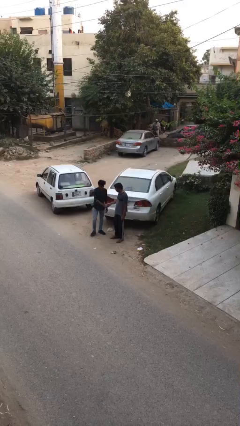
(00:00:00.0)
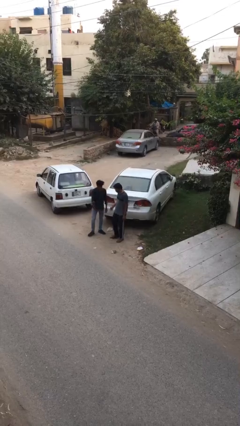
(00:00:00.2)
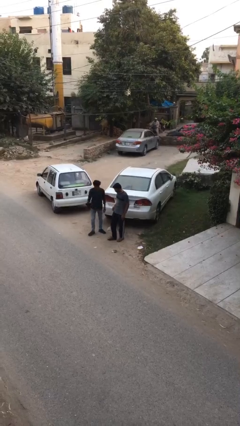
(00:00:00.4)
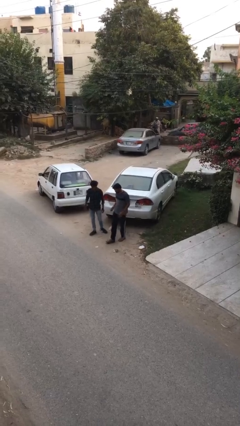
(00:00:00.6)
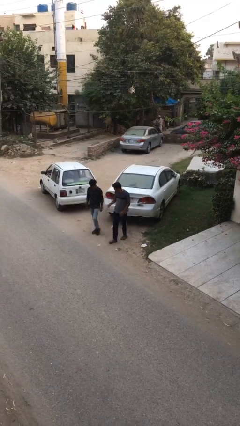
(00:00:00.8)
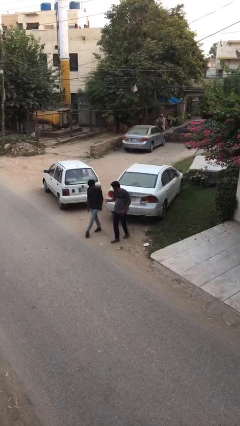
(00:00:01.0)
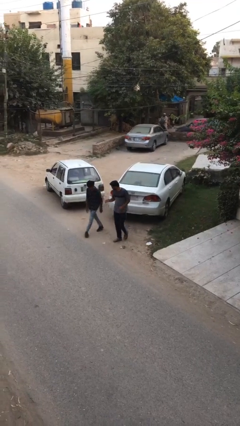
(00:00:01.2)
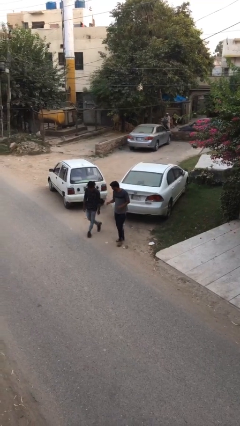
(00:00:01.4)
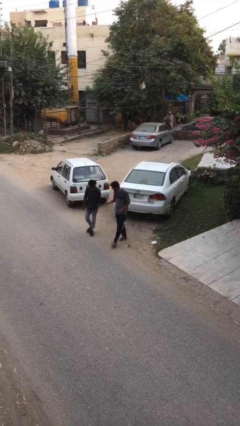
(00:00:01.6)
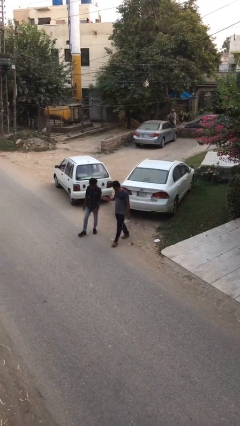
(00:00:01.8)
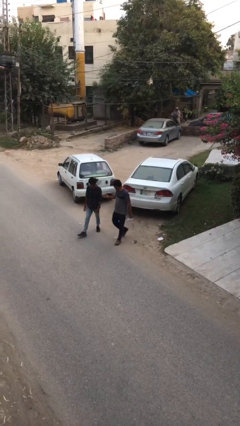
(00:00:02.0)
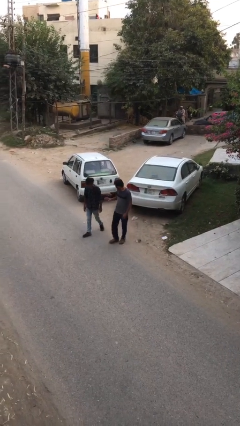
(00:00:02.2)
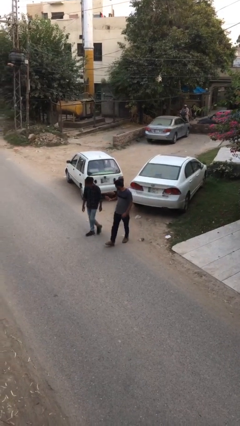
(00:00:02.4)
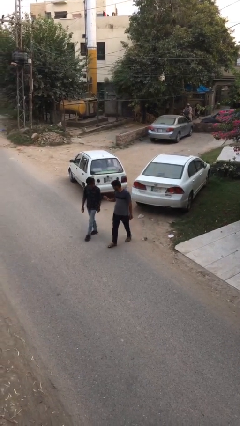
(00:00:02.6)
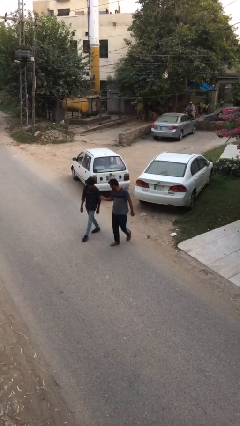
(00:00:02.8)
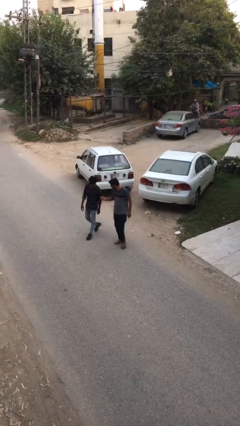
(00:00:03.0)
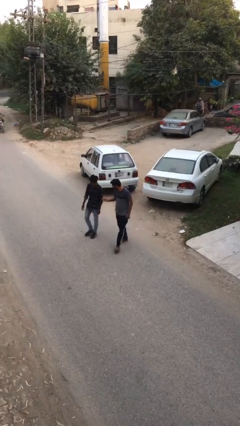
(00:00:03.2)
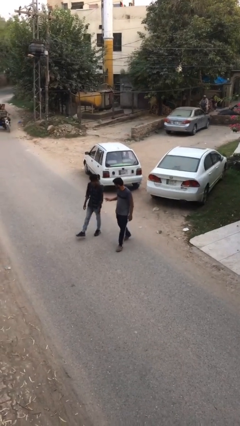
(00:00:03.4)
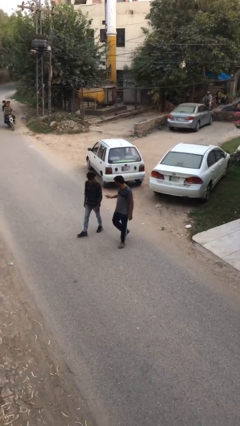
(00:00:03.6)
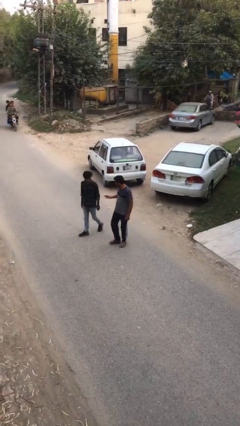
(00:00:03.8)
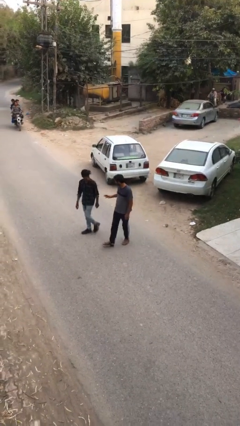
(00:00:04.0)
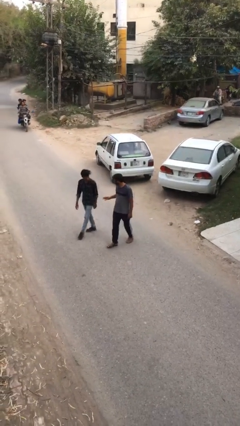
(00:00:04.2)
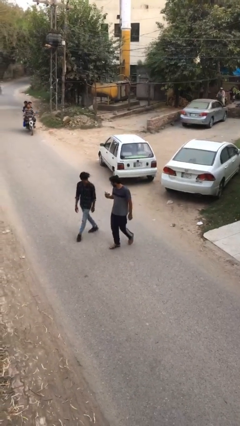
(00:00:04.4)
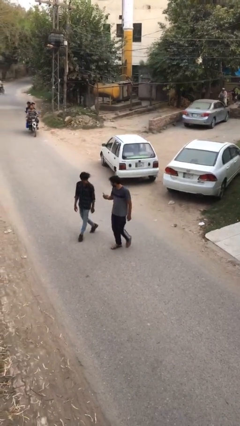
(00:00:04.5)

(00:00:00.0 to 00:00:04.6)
person talks to person

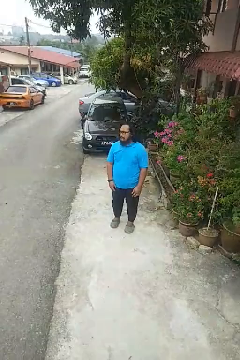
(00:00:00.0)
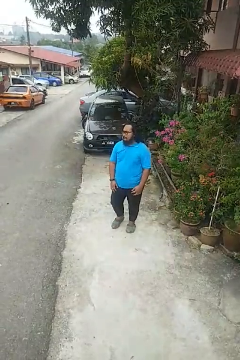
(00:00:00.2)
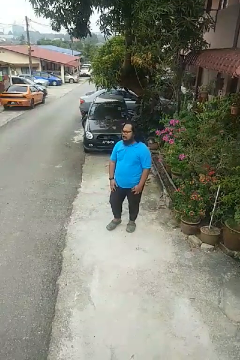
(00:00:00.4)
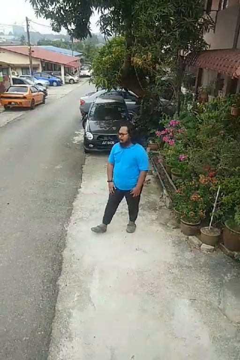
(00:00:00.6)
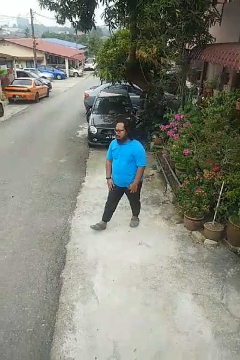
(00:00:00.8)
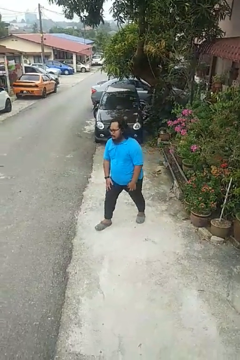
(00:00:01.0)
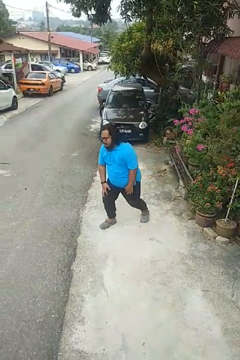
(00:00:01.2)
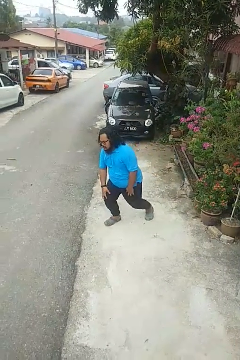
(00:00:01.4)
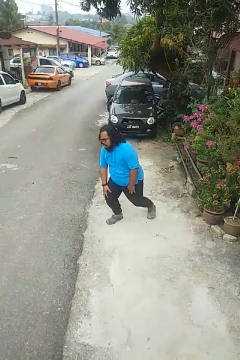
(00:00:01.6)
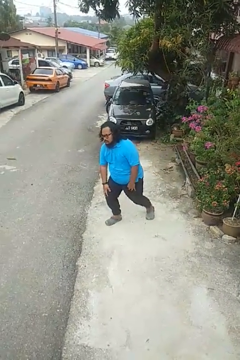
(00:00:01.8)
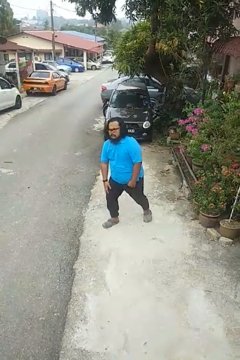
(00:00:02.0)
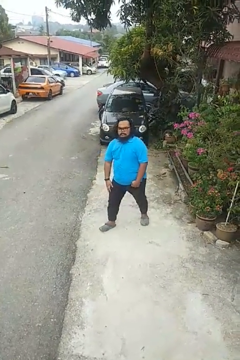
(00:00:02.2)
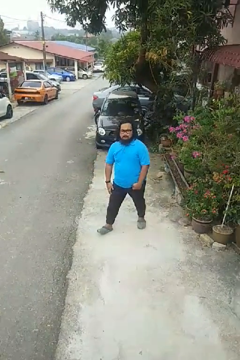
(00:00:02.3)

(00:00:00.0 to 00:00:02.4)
person exercises with lunges

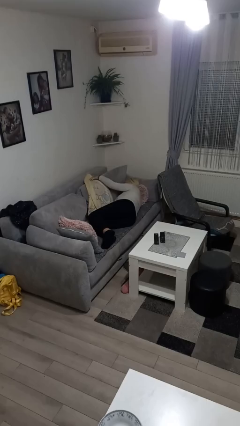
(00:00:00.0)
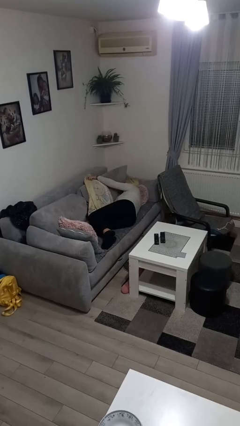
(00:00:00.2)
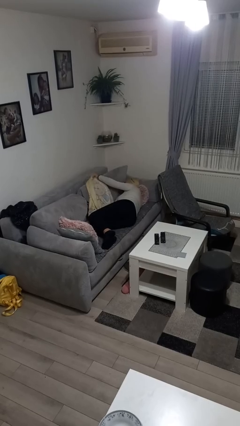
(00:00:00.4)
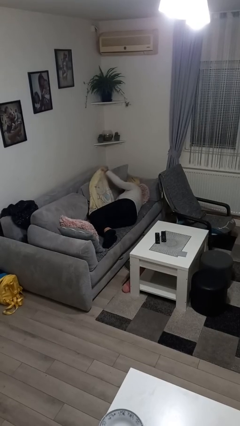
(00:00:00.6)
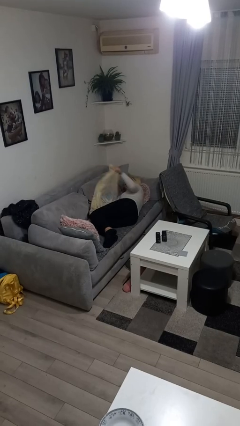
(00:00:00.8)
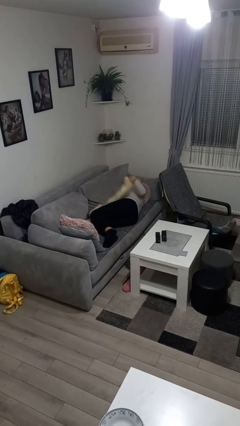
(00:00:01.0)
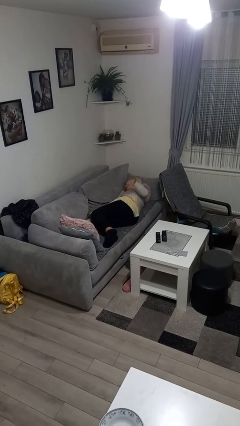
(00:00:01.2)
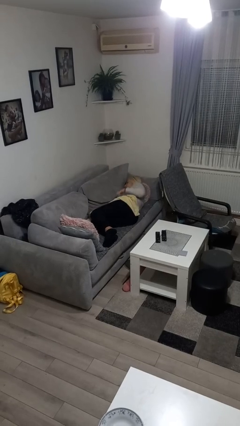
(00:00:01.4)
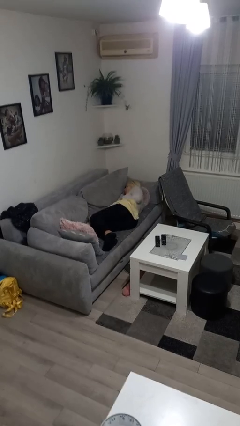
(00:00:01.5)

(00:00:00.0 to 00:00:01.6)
person covers with blanket

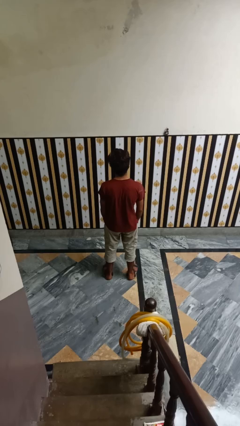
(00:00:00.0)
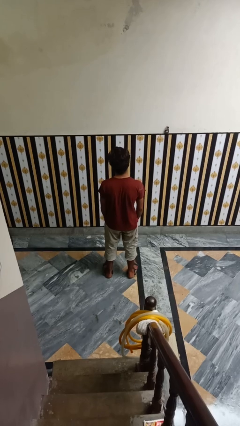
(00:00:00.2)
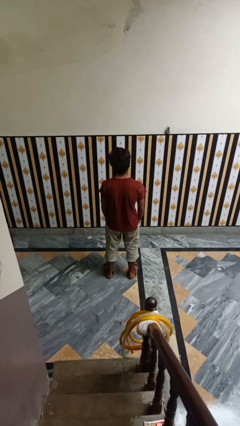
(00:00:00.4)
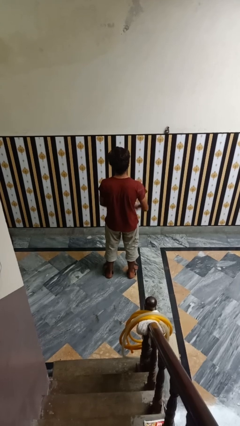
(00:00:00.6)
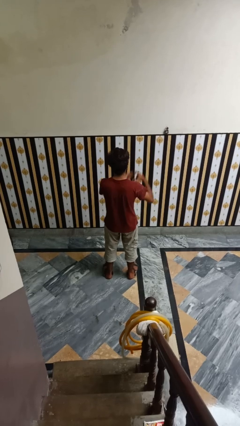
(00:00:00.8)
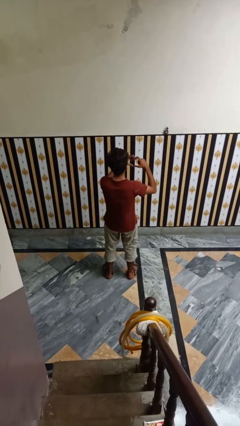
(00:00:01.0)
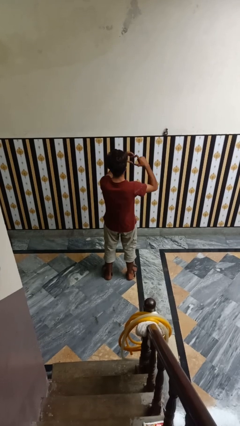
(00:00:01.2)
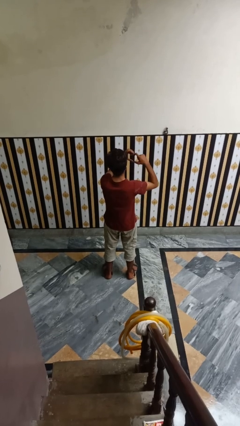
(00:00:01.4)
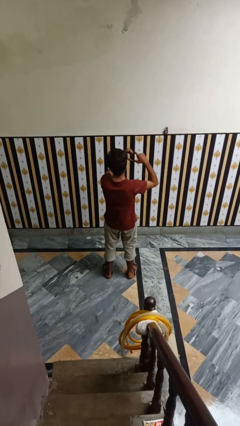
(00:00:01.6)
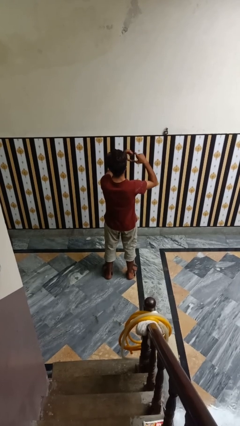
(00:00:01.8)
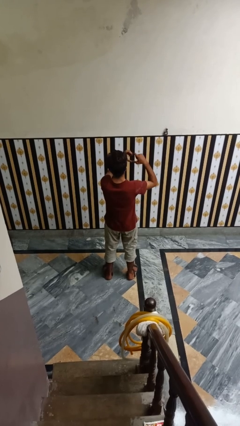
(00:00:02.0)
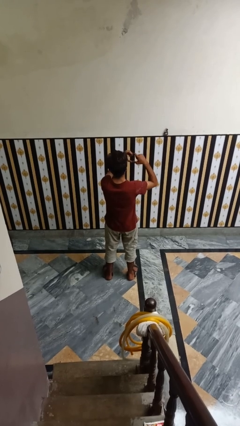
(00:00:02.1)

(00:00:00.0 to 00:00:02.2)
person gestures heart

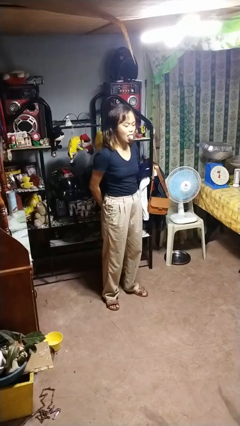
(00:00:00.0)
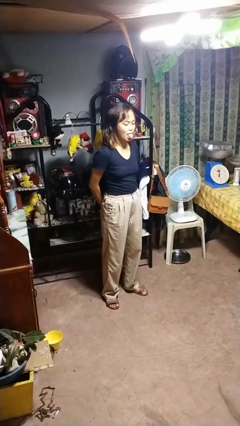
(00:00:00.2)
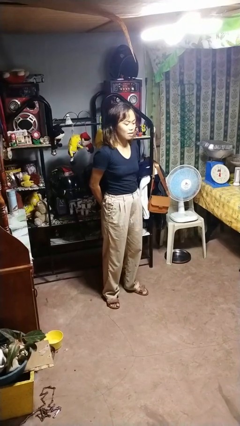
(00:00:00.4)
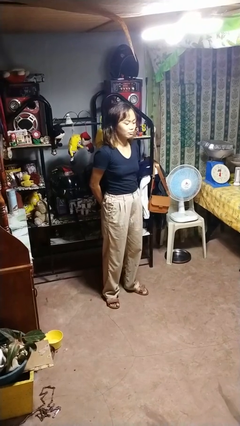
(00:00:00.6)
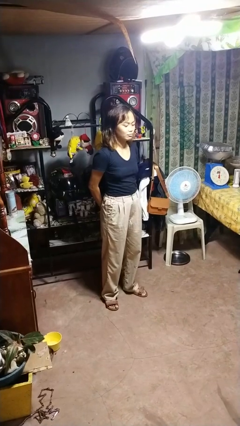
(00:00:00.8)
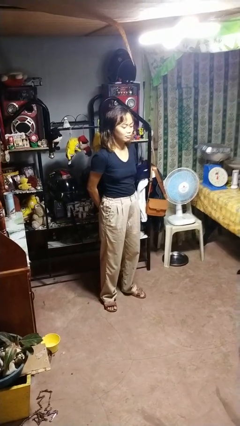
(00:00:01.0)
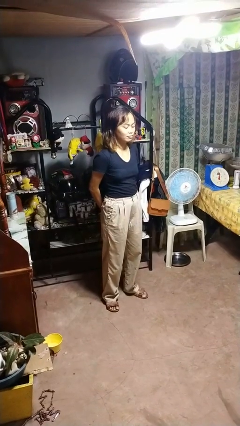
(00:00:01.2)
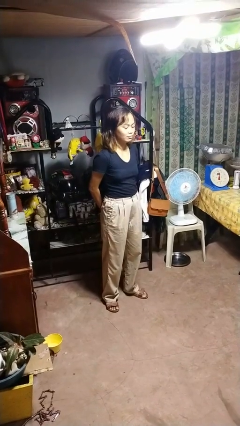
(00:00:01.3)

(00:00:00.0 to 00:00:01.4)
person sticks out tongue

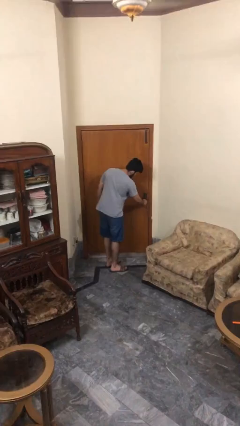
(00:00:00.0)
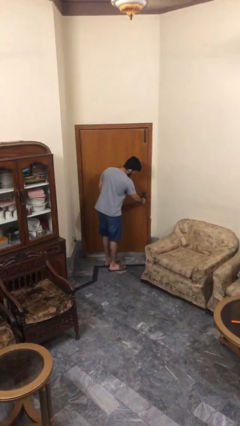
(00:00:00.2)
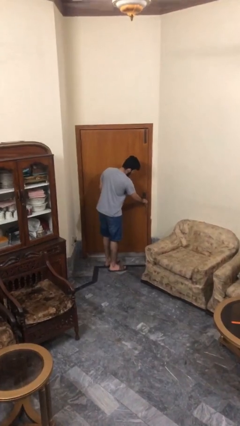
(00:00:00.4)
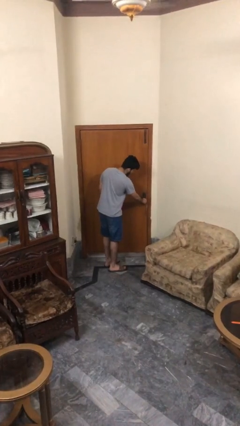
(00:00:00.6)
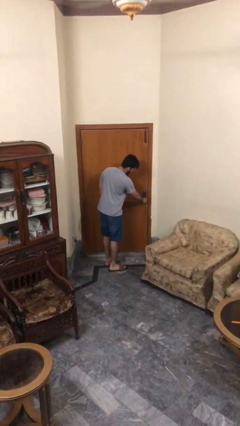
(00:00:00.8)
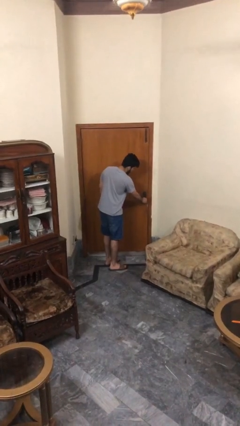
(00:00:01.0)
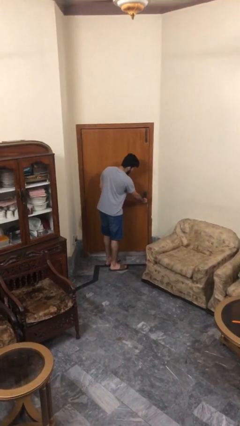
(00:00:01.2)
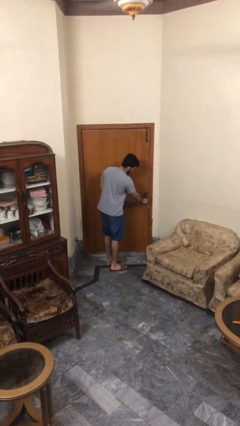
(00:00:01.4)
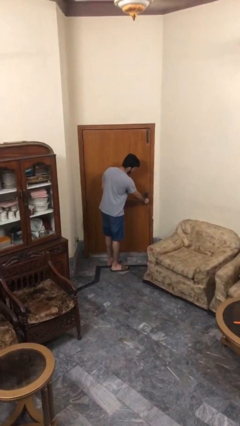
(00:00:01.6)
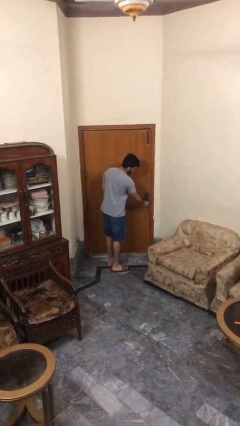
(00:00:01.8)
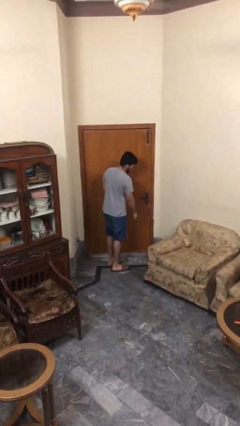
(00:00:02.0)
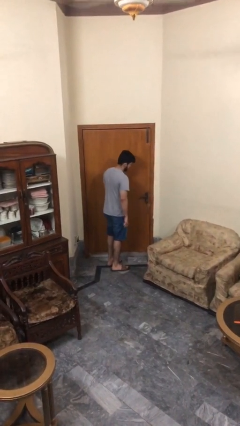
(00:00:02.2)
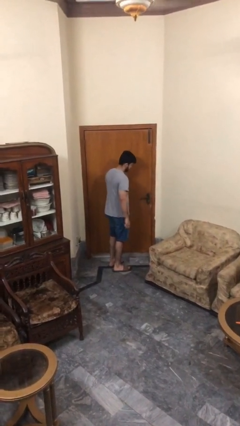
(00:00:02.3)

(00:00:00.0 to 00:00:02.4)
person locks door with keys

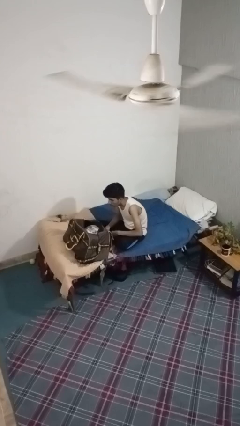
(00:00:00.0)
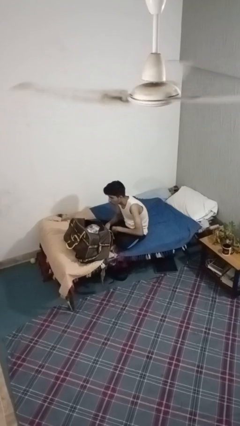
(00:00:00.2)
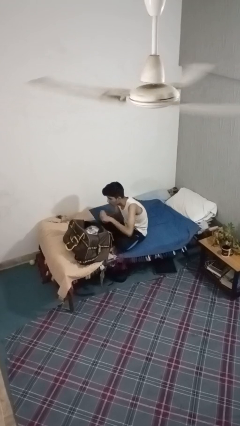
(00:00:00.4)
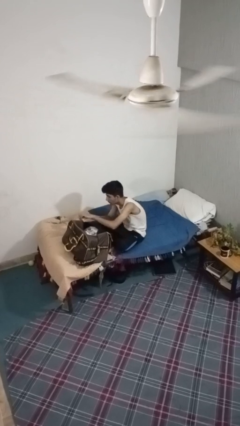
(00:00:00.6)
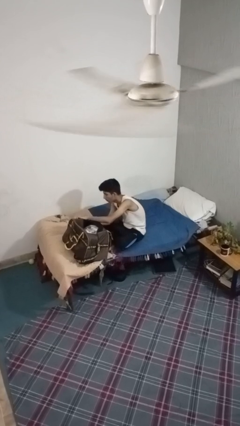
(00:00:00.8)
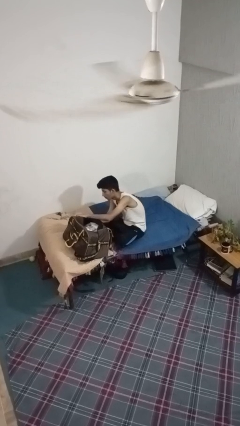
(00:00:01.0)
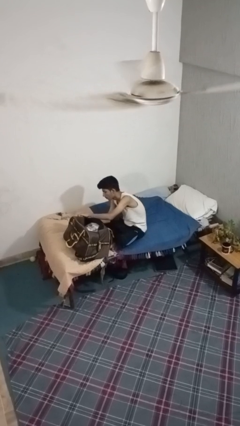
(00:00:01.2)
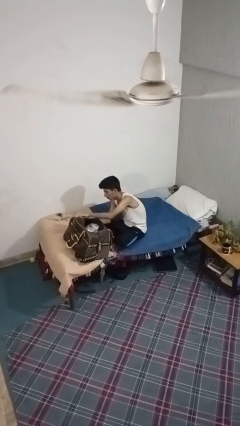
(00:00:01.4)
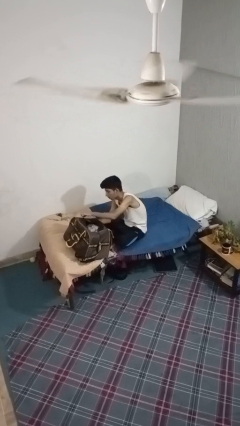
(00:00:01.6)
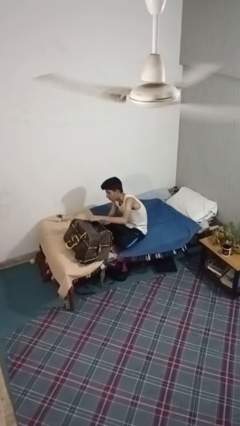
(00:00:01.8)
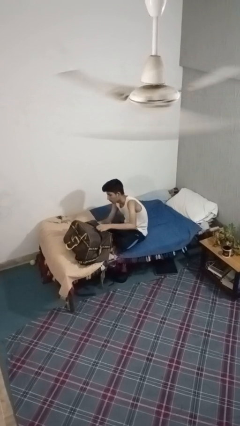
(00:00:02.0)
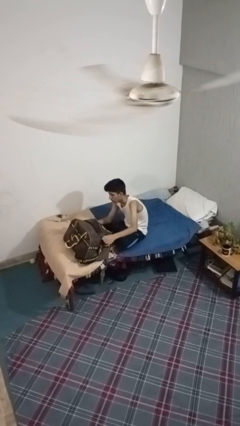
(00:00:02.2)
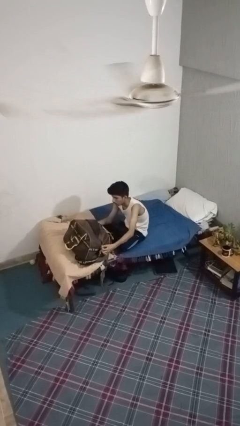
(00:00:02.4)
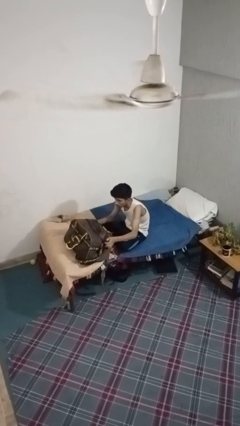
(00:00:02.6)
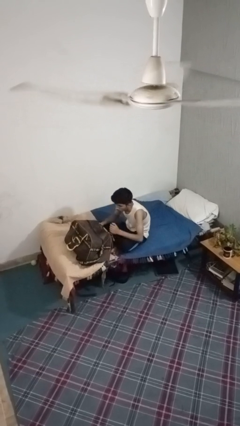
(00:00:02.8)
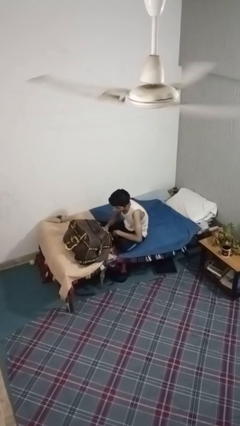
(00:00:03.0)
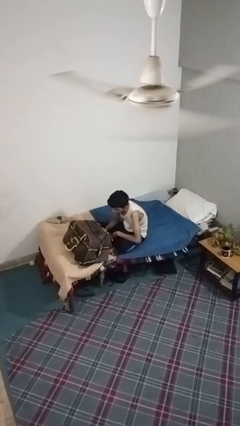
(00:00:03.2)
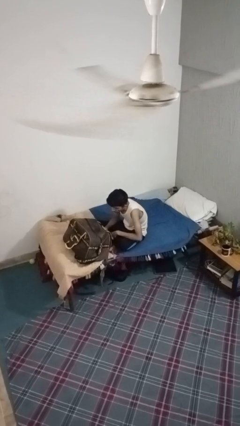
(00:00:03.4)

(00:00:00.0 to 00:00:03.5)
person closes suitcase
